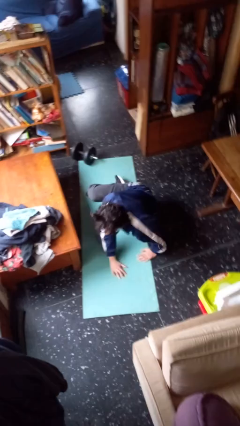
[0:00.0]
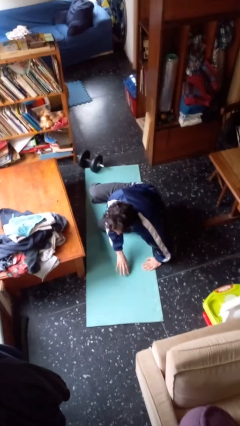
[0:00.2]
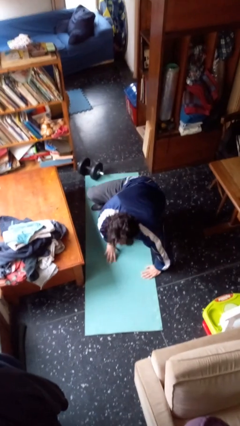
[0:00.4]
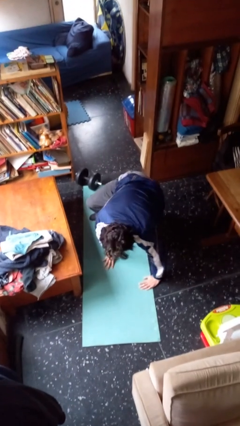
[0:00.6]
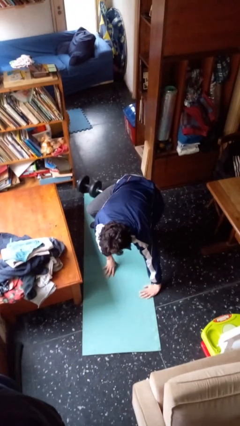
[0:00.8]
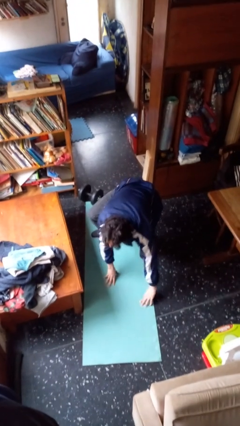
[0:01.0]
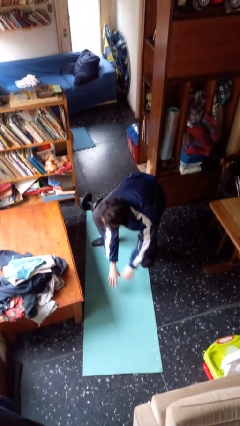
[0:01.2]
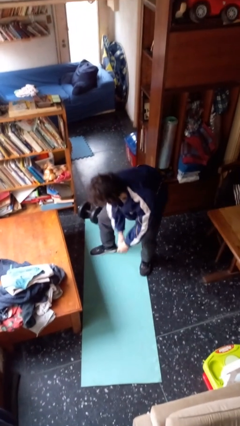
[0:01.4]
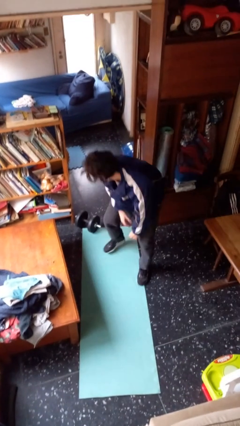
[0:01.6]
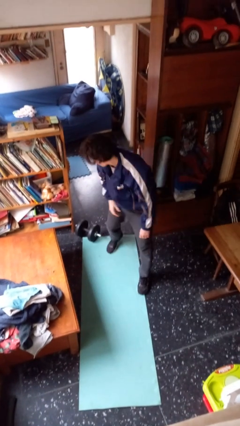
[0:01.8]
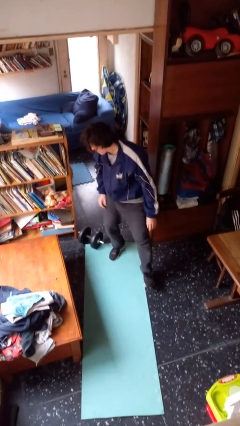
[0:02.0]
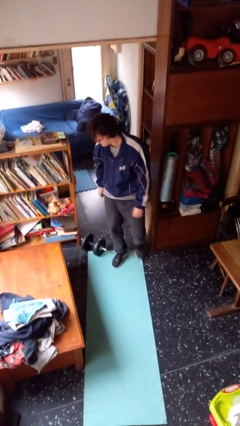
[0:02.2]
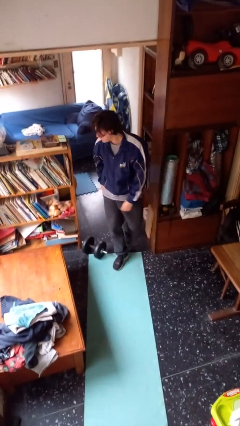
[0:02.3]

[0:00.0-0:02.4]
person stands up from floor

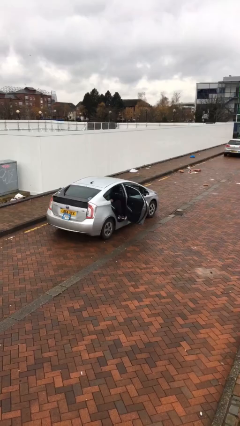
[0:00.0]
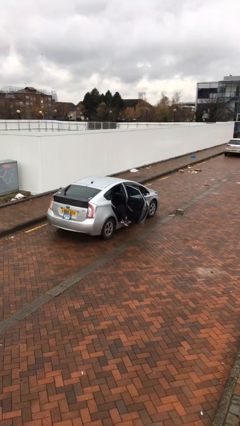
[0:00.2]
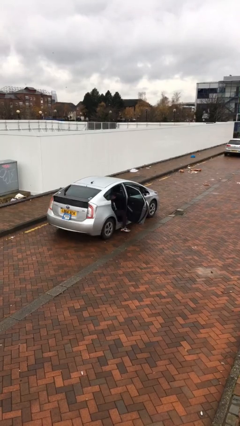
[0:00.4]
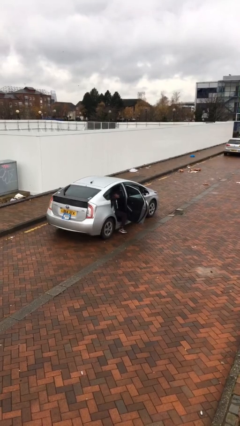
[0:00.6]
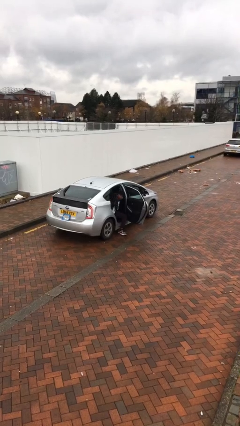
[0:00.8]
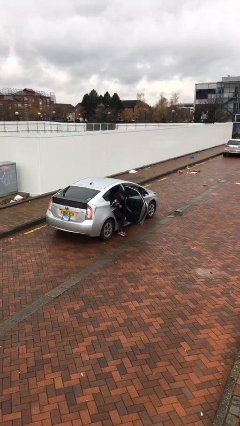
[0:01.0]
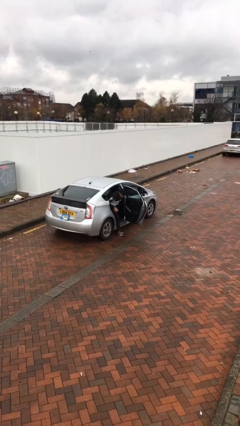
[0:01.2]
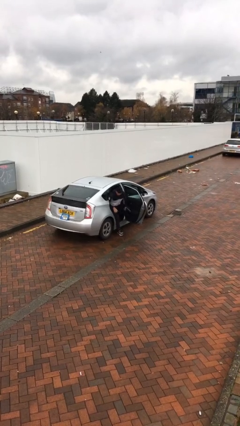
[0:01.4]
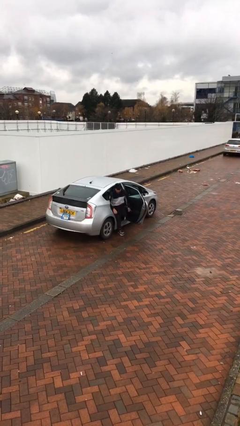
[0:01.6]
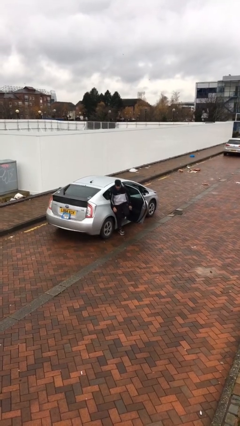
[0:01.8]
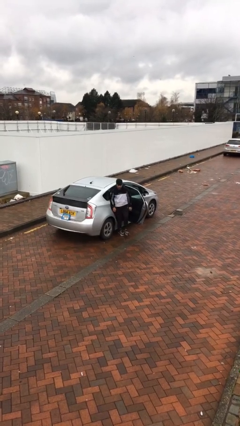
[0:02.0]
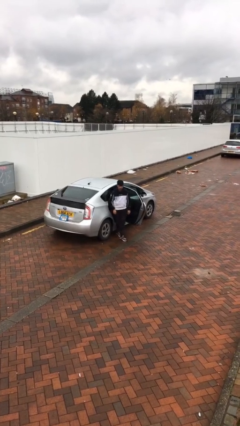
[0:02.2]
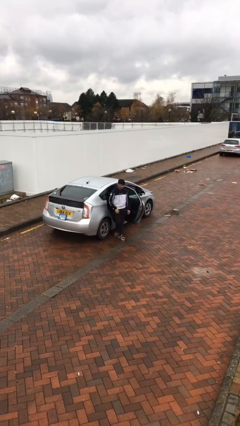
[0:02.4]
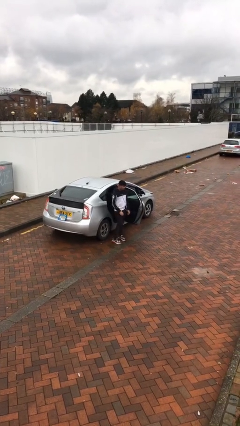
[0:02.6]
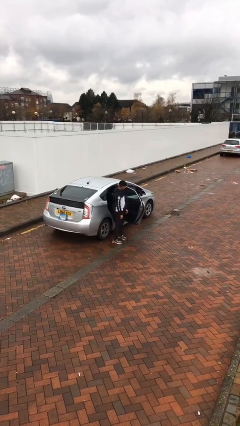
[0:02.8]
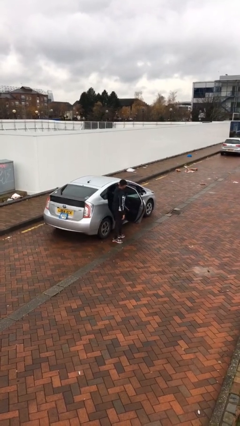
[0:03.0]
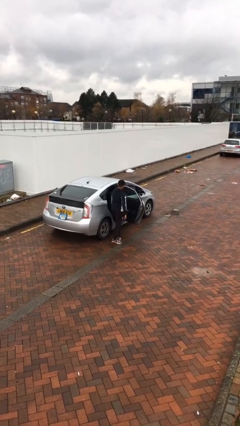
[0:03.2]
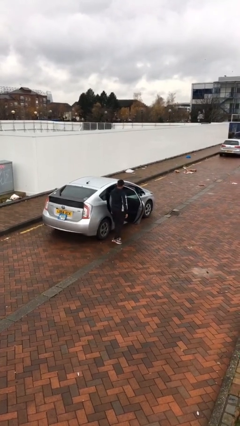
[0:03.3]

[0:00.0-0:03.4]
person exits car

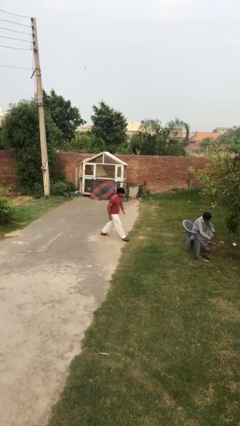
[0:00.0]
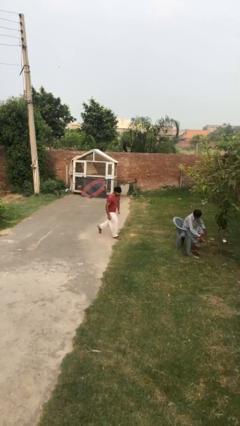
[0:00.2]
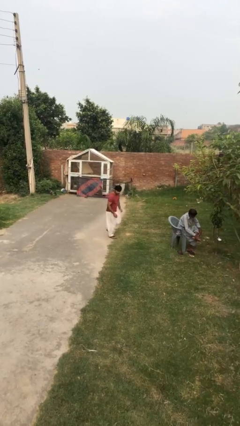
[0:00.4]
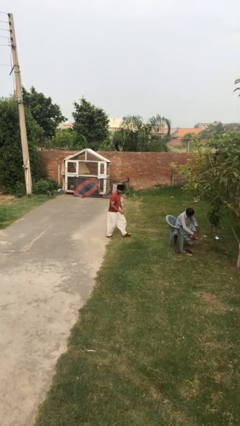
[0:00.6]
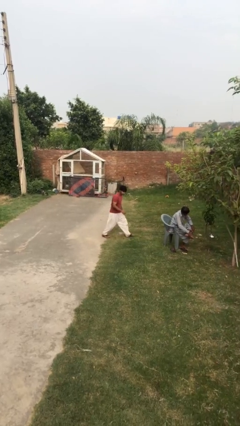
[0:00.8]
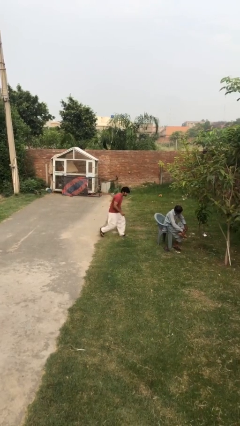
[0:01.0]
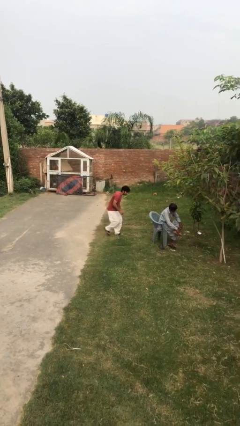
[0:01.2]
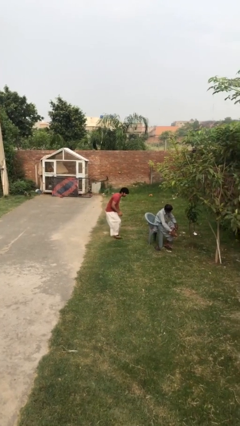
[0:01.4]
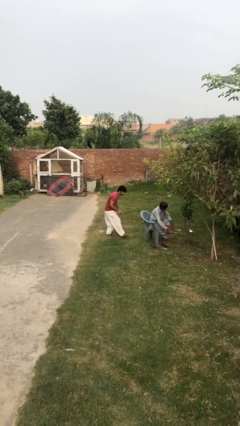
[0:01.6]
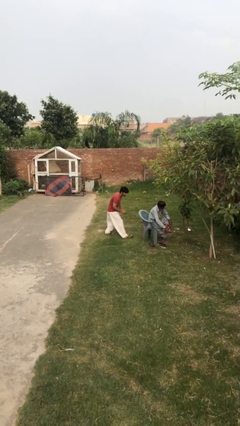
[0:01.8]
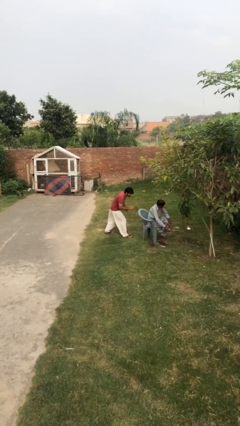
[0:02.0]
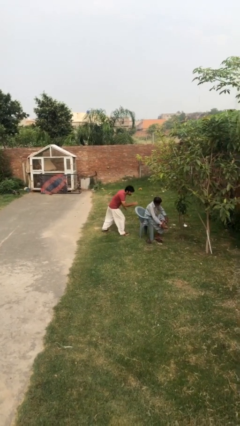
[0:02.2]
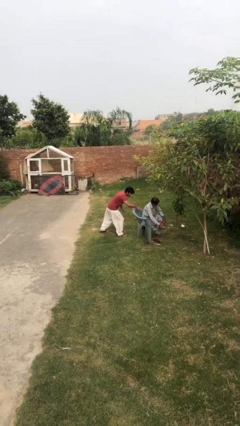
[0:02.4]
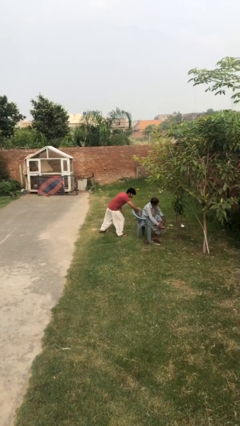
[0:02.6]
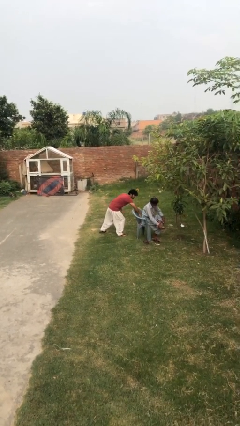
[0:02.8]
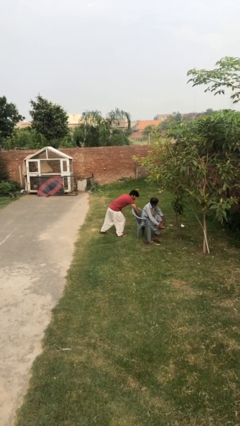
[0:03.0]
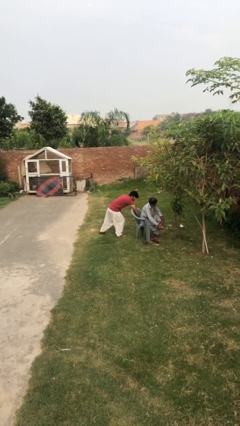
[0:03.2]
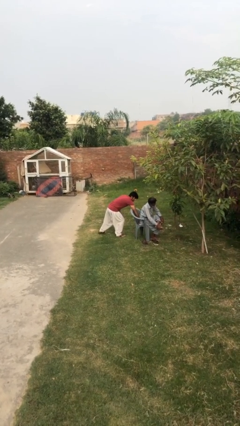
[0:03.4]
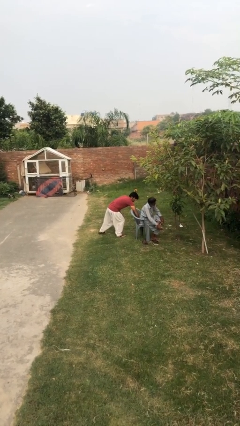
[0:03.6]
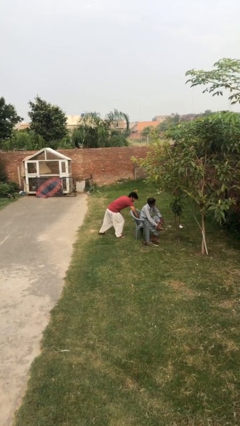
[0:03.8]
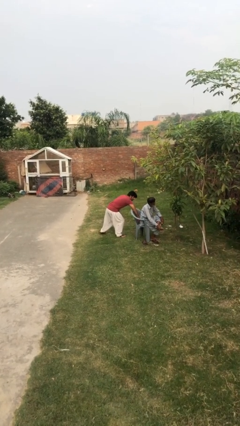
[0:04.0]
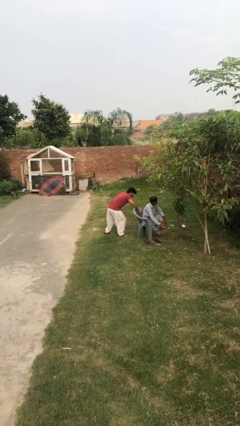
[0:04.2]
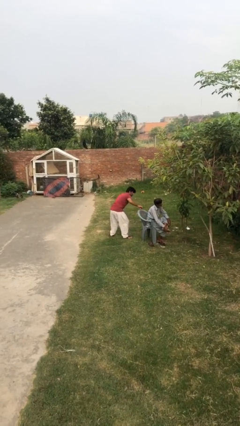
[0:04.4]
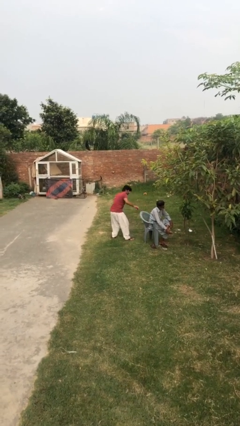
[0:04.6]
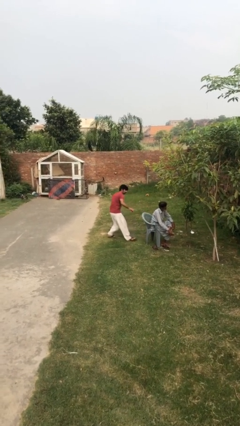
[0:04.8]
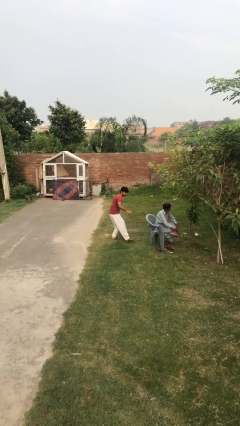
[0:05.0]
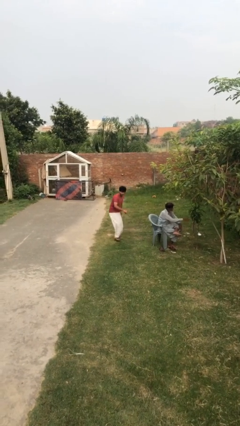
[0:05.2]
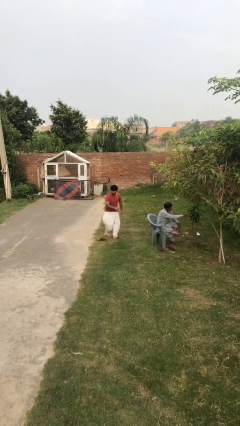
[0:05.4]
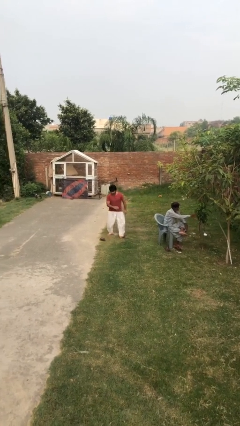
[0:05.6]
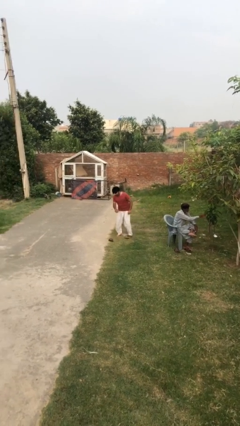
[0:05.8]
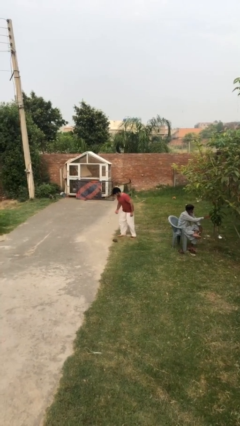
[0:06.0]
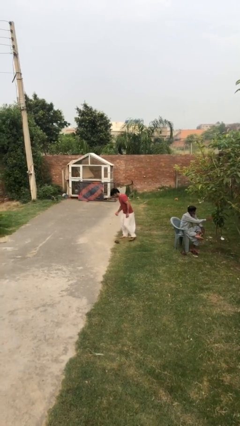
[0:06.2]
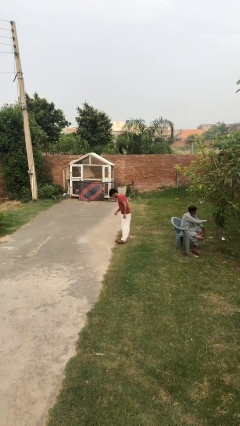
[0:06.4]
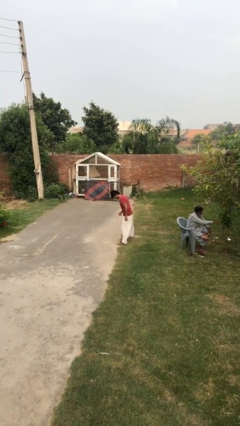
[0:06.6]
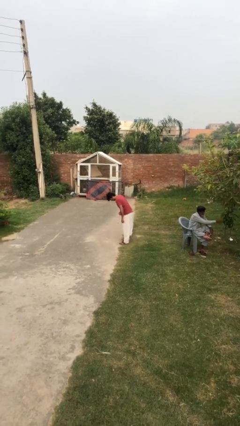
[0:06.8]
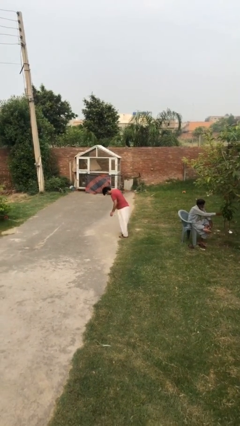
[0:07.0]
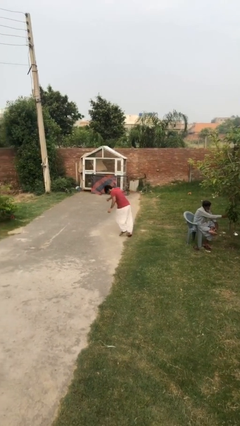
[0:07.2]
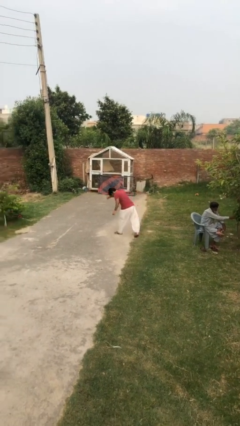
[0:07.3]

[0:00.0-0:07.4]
person steals object from person

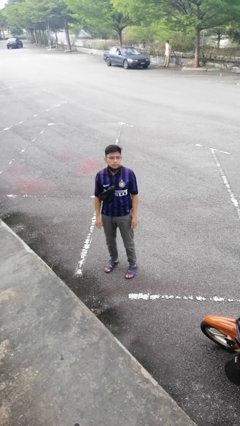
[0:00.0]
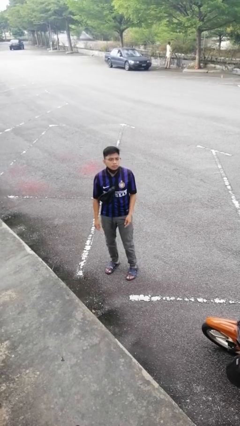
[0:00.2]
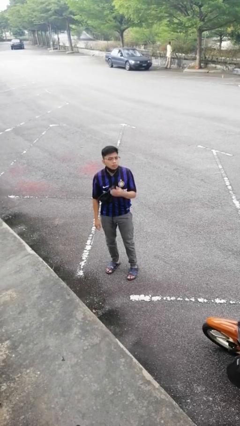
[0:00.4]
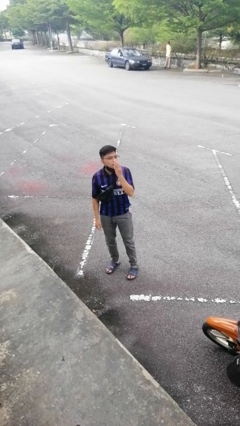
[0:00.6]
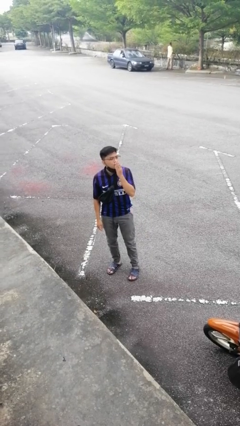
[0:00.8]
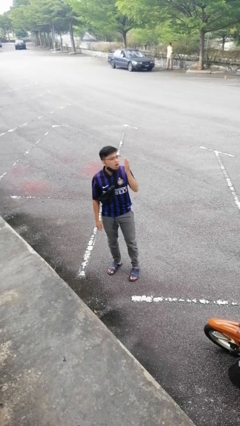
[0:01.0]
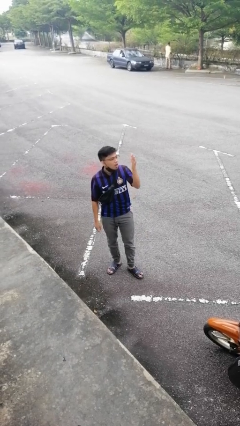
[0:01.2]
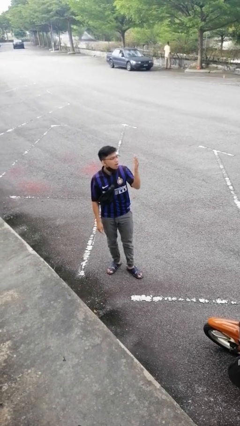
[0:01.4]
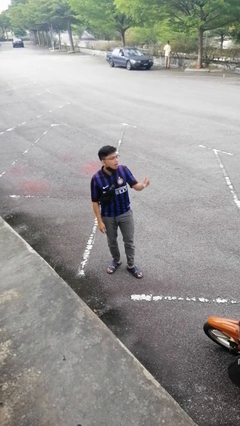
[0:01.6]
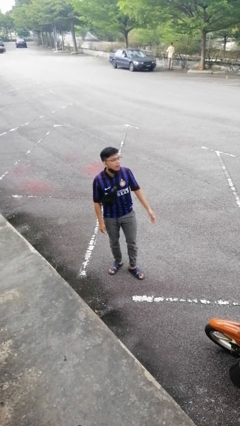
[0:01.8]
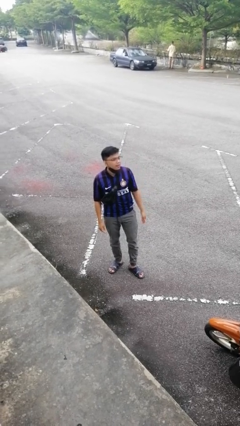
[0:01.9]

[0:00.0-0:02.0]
person gestures blow kiss

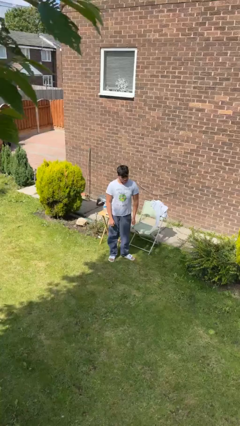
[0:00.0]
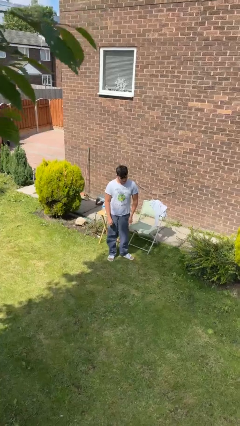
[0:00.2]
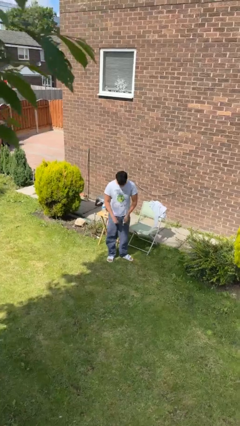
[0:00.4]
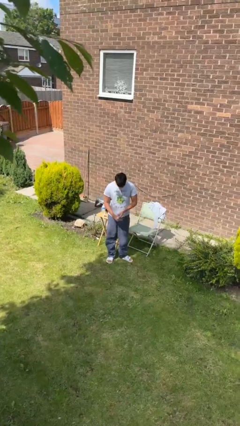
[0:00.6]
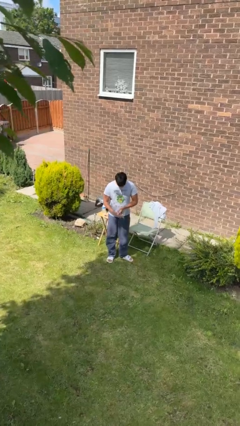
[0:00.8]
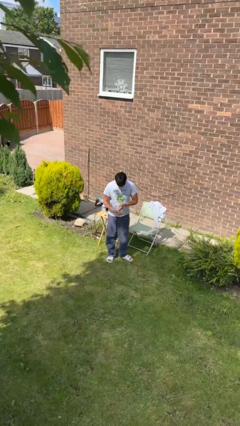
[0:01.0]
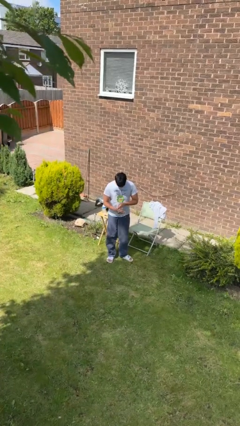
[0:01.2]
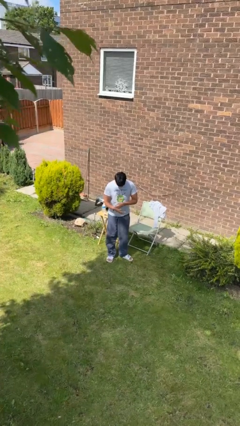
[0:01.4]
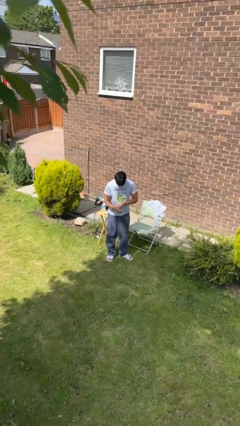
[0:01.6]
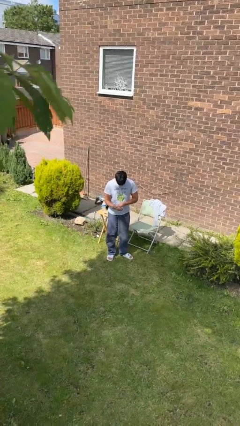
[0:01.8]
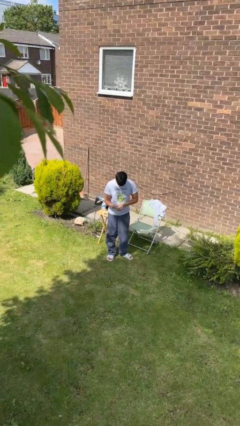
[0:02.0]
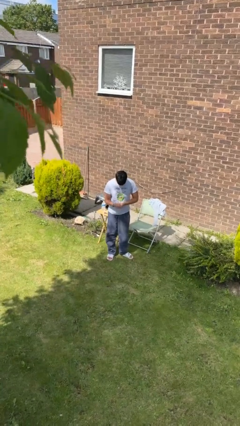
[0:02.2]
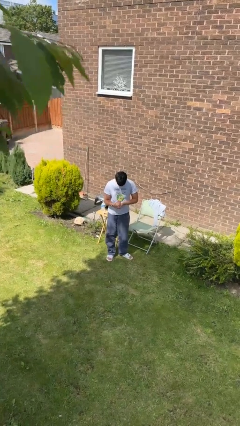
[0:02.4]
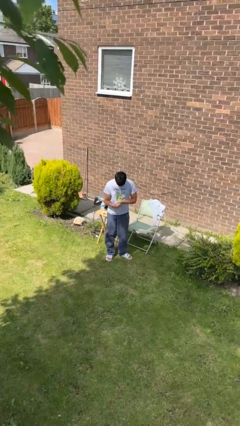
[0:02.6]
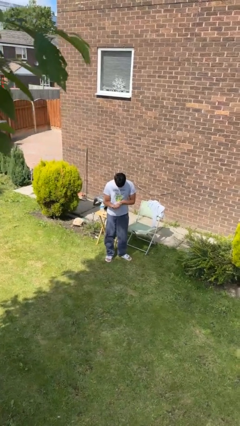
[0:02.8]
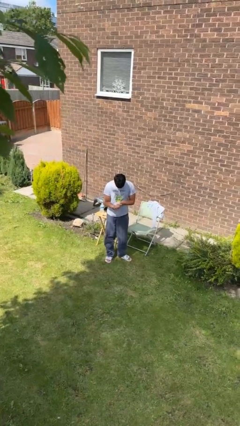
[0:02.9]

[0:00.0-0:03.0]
person puts on wristwatch
